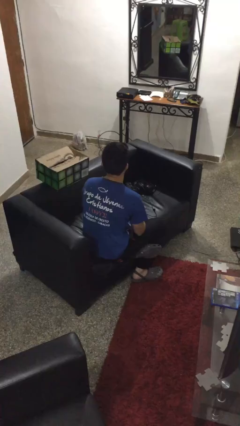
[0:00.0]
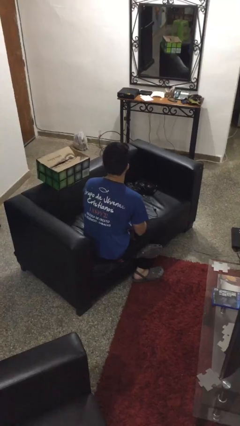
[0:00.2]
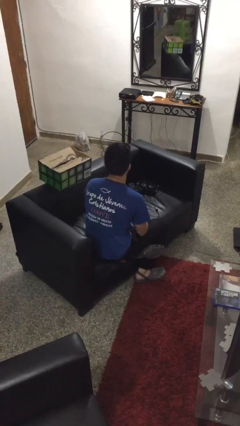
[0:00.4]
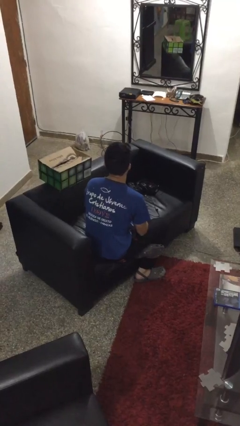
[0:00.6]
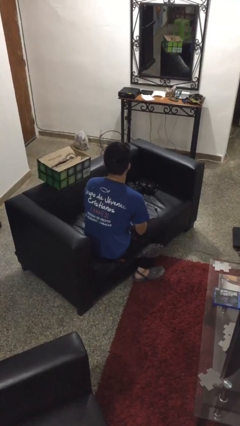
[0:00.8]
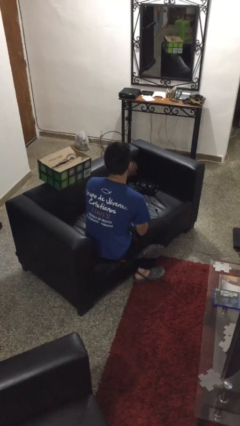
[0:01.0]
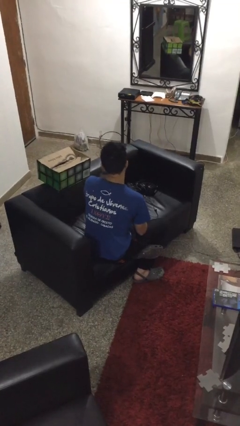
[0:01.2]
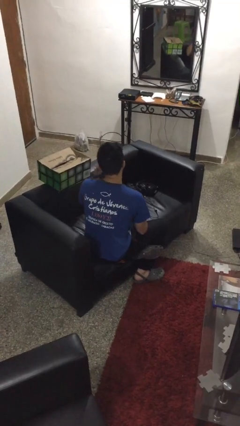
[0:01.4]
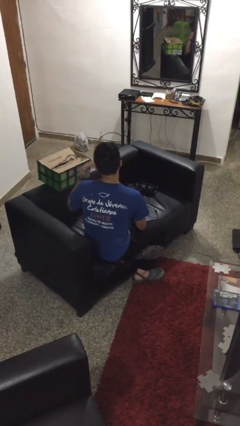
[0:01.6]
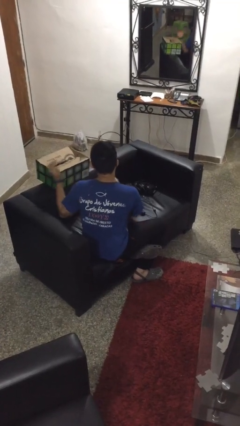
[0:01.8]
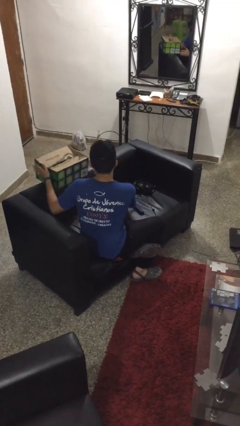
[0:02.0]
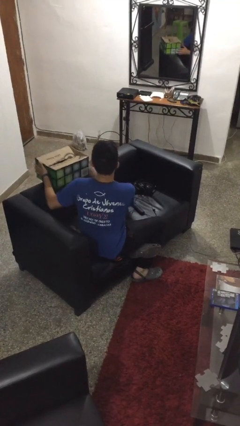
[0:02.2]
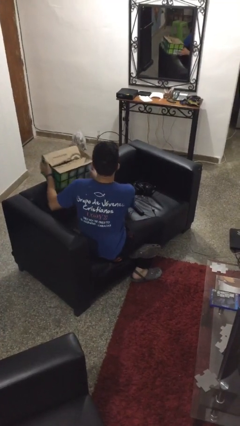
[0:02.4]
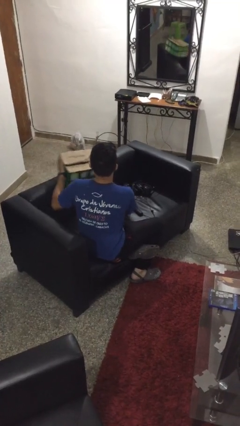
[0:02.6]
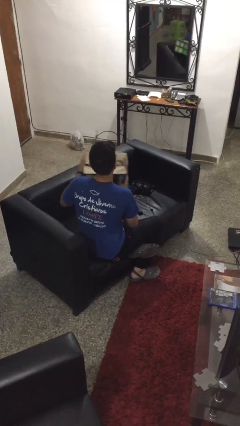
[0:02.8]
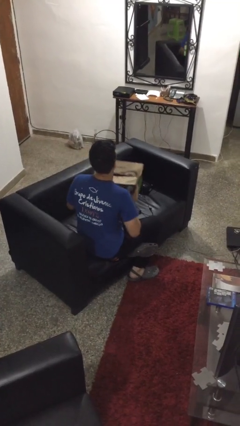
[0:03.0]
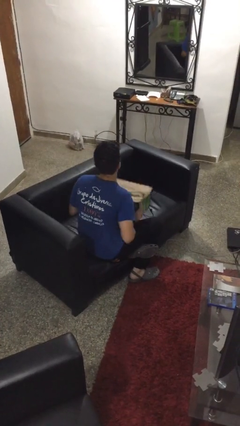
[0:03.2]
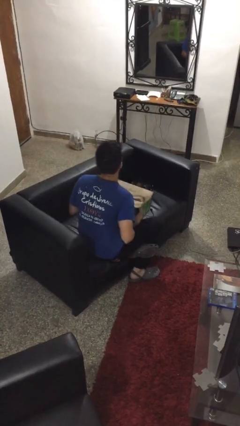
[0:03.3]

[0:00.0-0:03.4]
person picks up object from couch

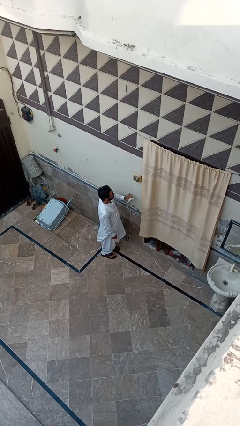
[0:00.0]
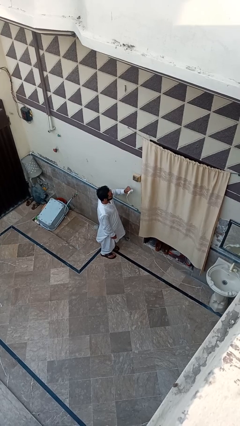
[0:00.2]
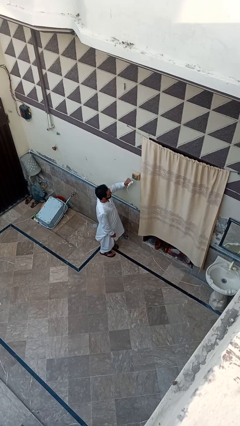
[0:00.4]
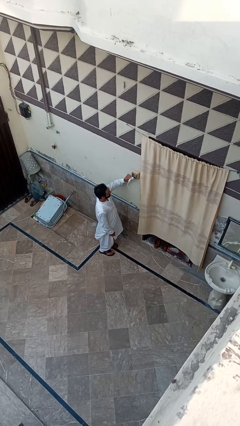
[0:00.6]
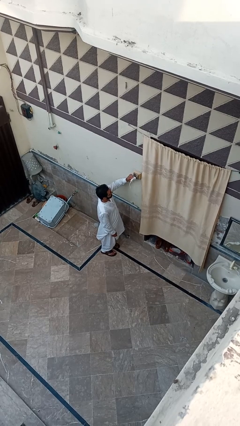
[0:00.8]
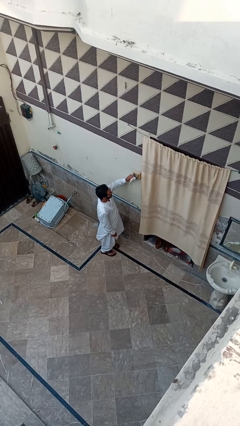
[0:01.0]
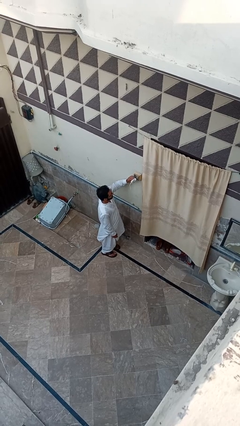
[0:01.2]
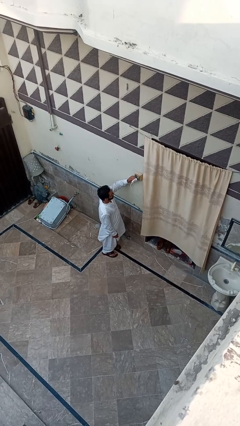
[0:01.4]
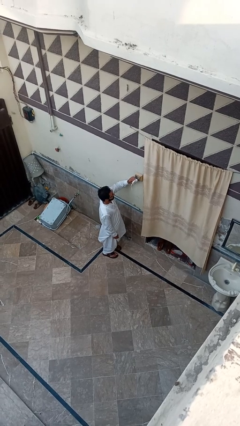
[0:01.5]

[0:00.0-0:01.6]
person plugs into electrical socket

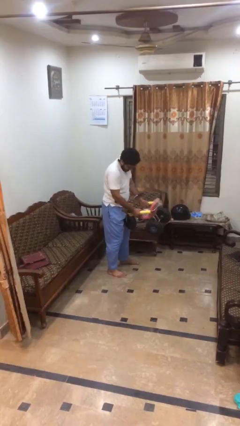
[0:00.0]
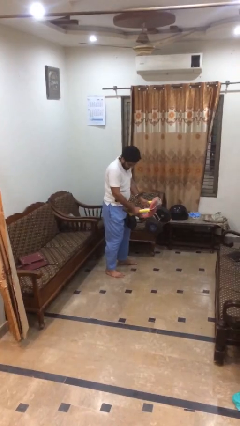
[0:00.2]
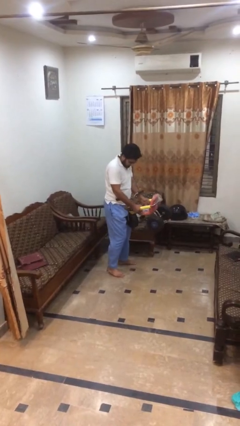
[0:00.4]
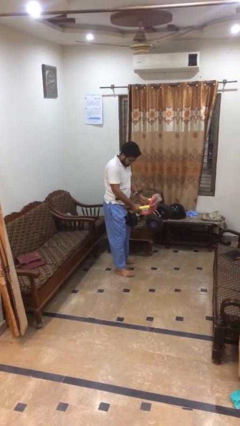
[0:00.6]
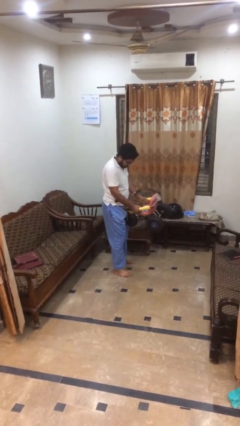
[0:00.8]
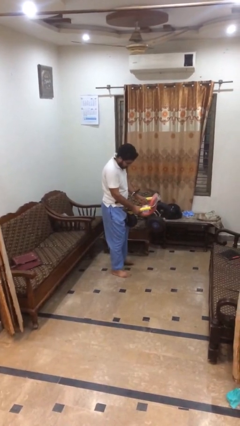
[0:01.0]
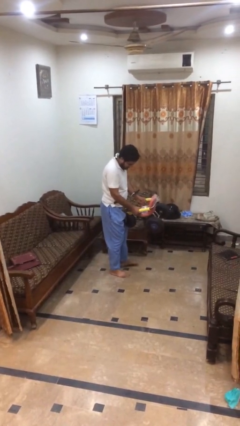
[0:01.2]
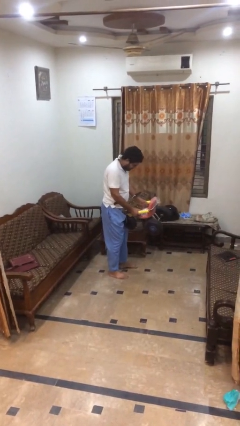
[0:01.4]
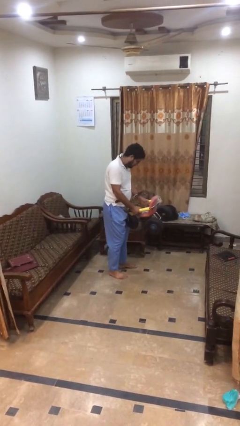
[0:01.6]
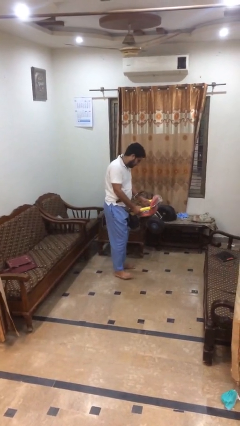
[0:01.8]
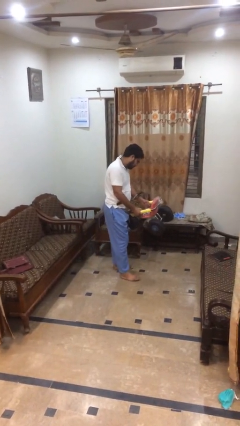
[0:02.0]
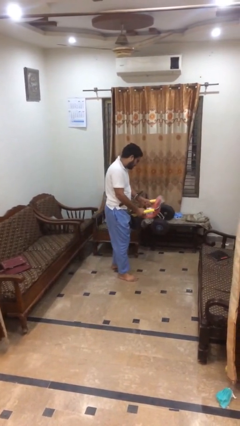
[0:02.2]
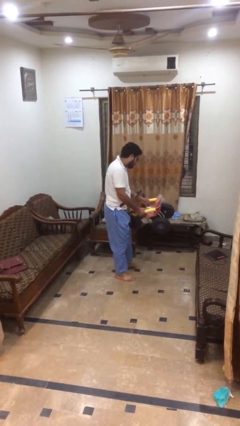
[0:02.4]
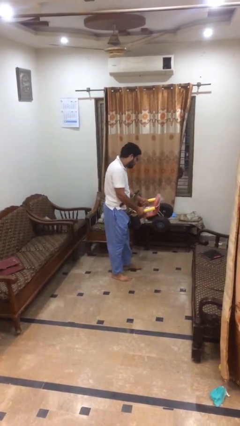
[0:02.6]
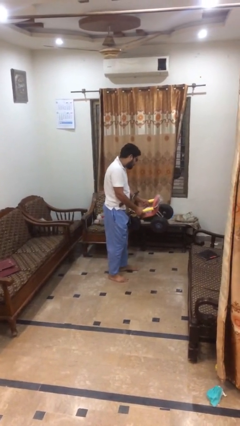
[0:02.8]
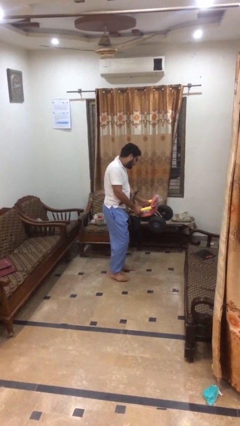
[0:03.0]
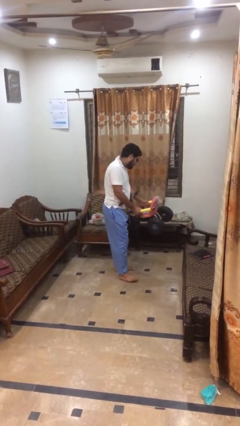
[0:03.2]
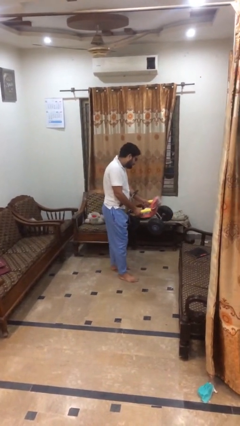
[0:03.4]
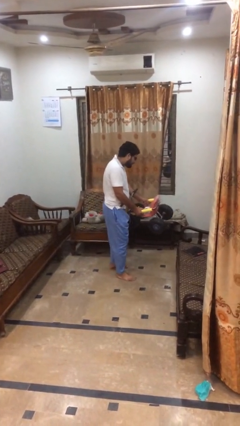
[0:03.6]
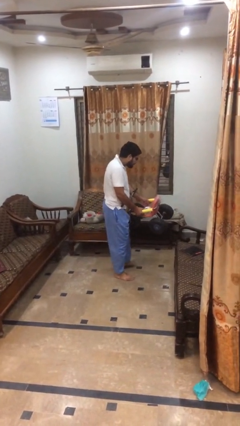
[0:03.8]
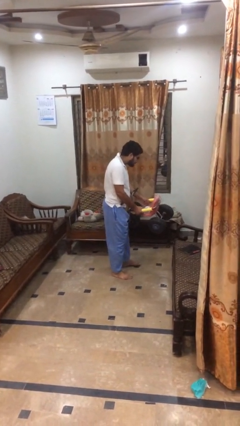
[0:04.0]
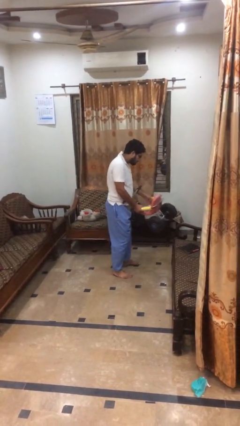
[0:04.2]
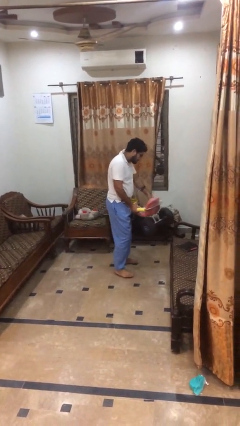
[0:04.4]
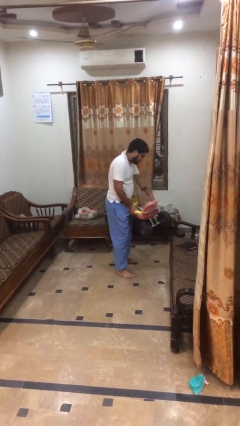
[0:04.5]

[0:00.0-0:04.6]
person carries heavy object

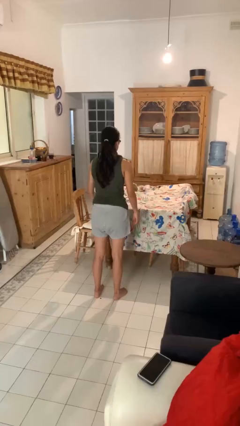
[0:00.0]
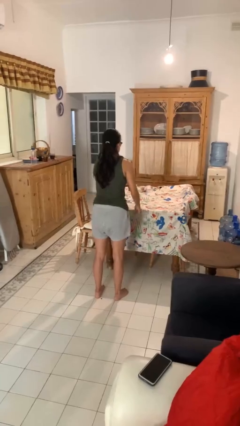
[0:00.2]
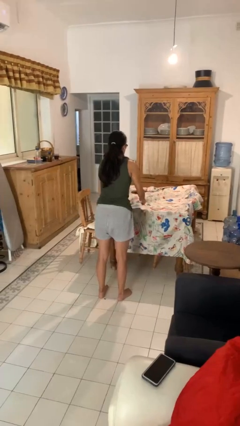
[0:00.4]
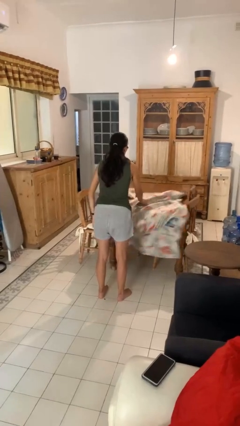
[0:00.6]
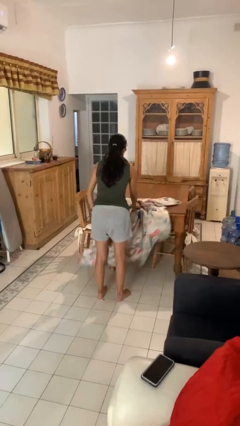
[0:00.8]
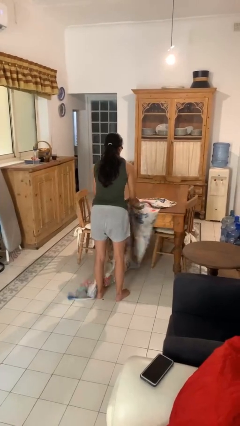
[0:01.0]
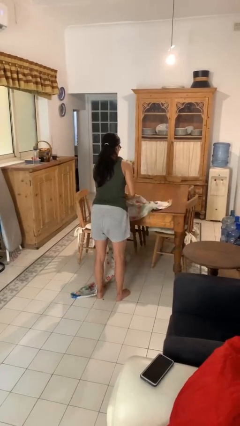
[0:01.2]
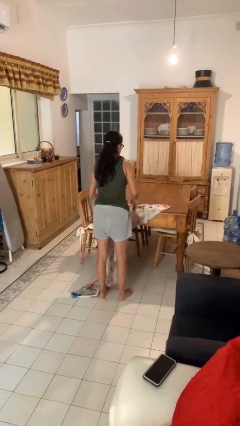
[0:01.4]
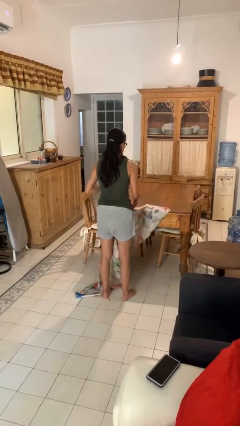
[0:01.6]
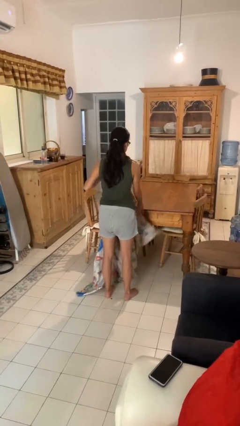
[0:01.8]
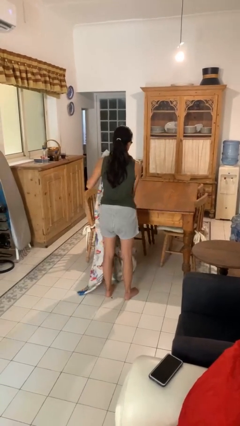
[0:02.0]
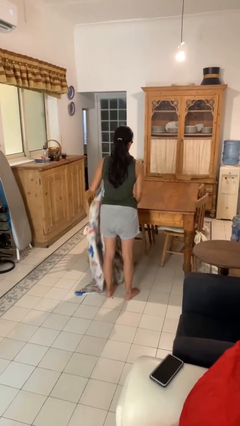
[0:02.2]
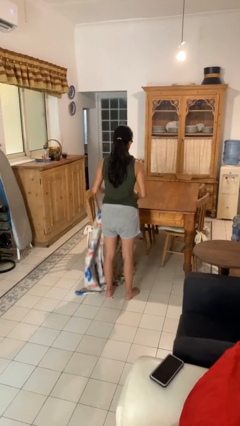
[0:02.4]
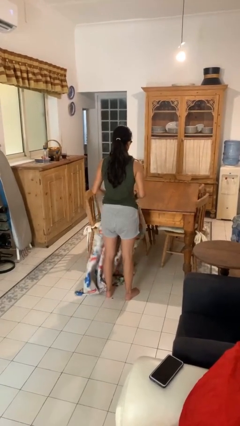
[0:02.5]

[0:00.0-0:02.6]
person folds tablecloth

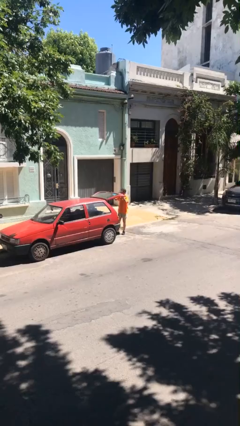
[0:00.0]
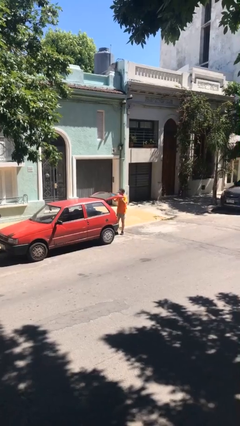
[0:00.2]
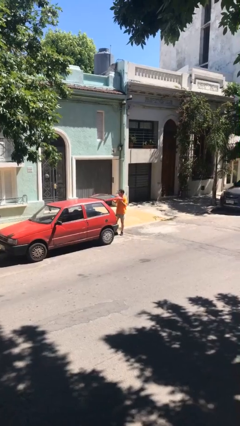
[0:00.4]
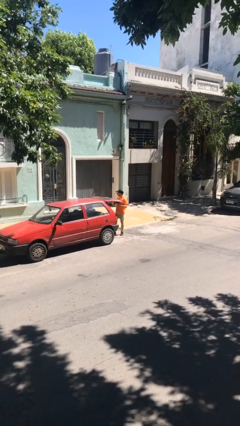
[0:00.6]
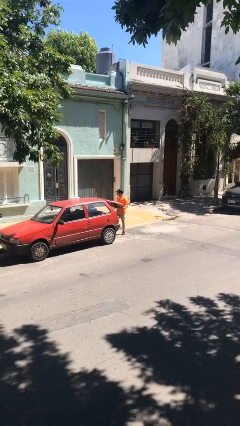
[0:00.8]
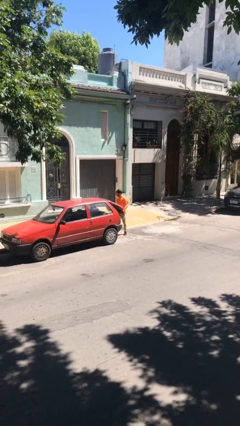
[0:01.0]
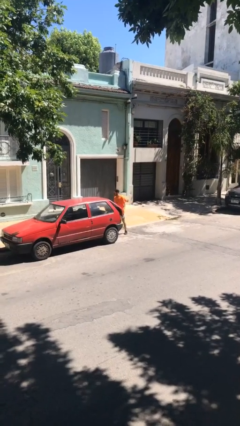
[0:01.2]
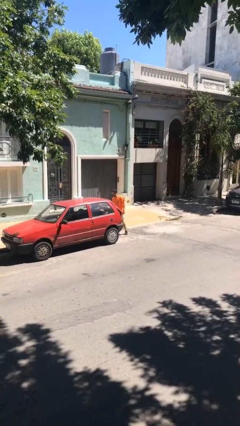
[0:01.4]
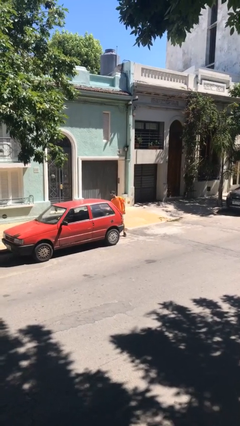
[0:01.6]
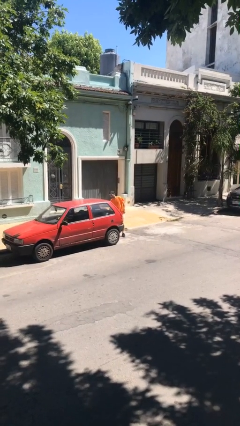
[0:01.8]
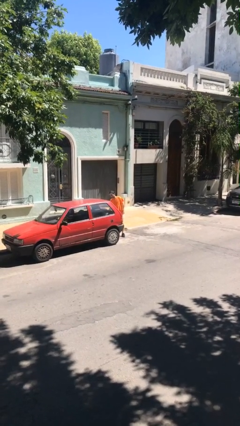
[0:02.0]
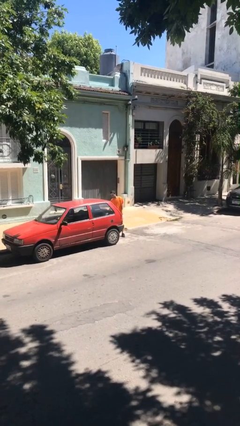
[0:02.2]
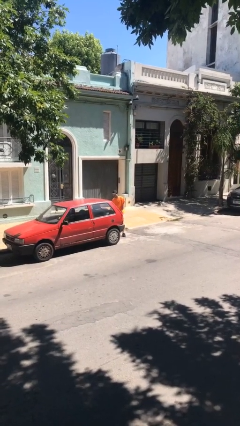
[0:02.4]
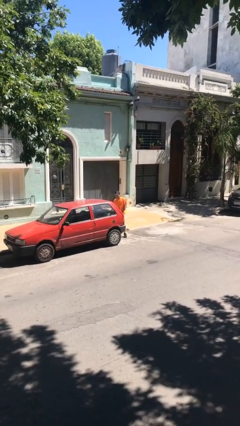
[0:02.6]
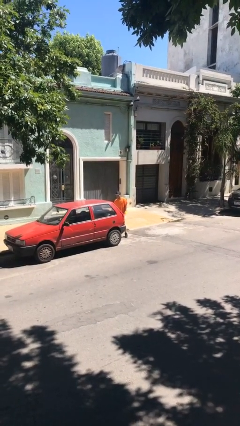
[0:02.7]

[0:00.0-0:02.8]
person closes car trunk

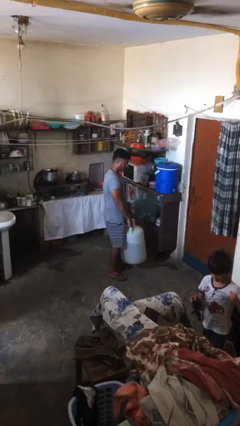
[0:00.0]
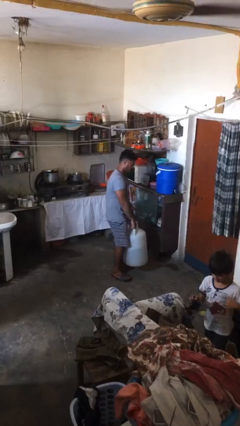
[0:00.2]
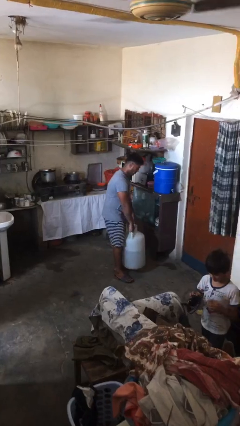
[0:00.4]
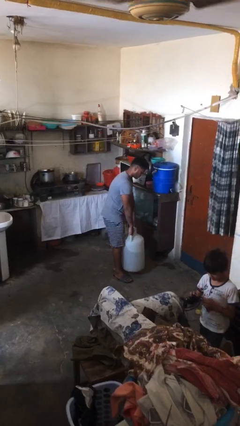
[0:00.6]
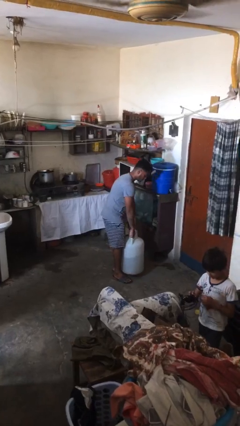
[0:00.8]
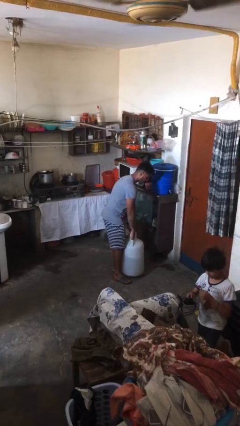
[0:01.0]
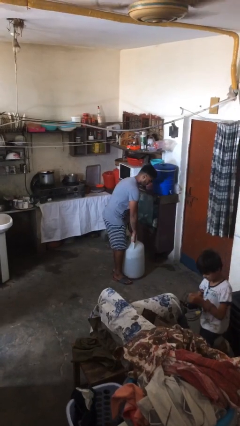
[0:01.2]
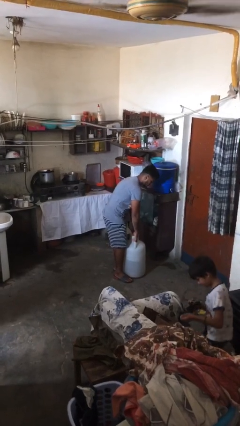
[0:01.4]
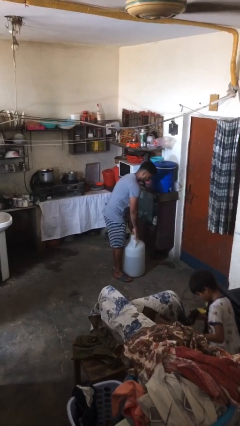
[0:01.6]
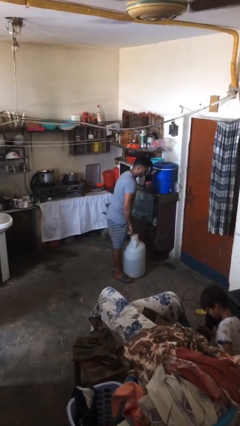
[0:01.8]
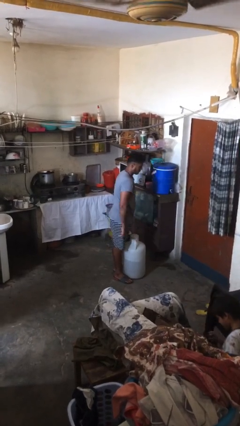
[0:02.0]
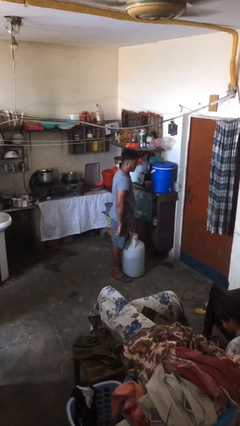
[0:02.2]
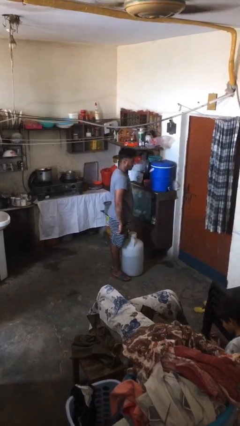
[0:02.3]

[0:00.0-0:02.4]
person puts down object on floor

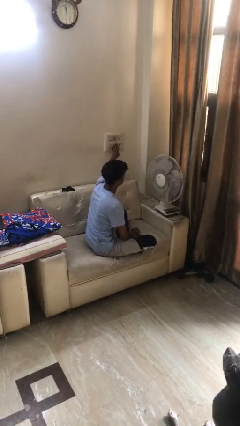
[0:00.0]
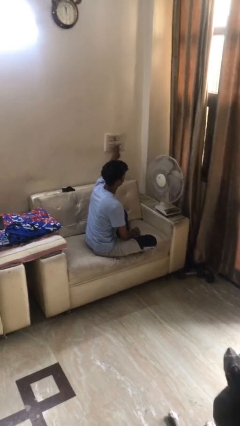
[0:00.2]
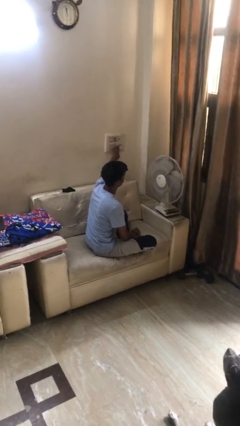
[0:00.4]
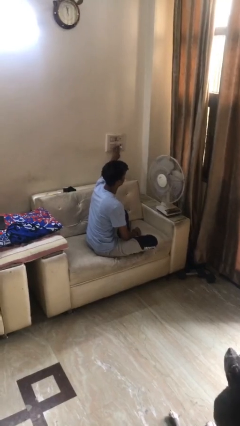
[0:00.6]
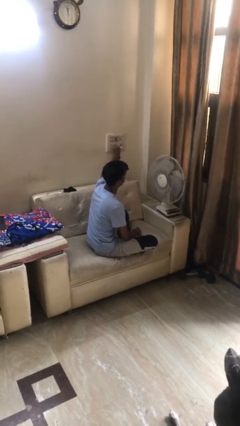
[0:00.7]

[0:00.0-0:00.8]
person turns off fan
